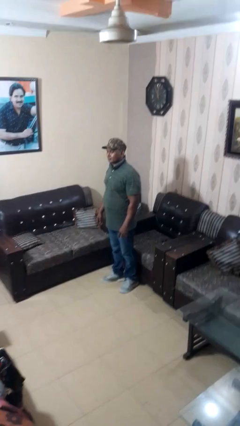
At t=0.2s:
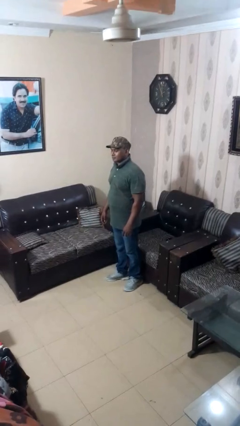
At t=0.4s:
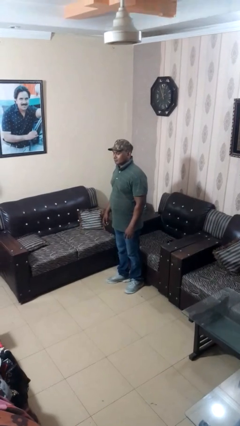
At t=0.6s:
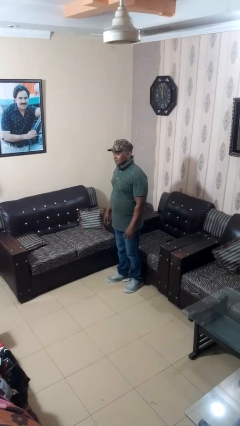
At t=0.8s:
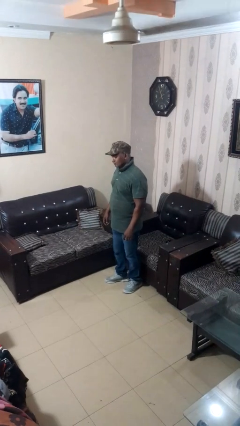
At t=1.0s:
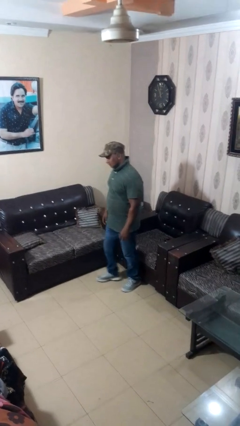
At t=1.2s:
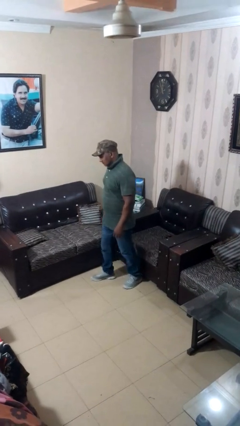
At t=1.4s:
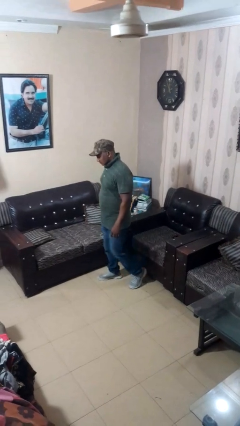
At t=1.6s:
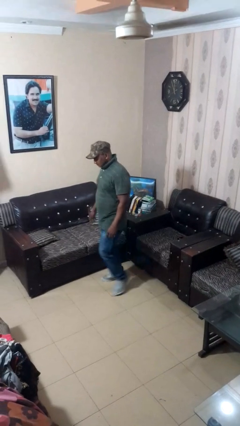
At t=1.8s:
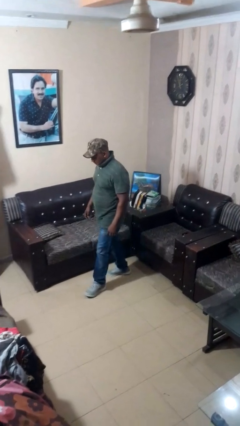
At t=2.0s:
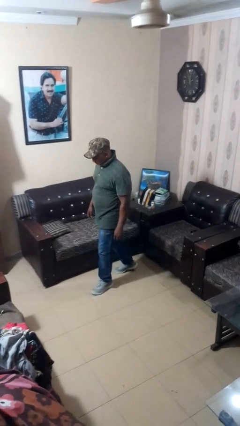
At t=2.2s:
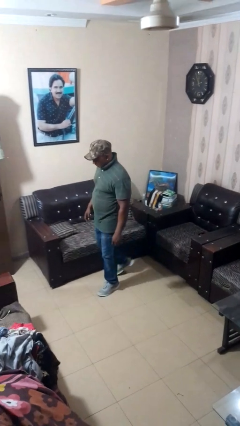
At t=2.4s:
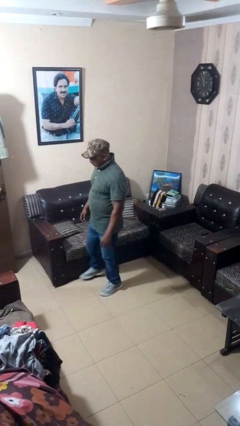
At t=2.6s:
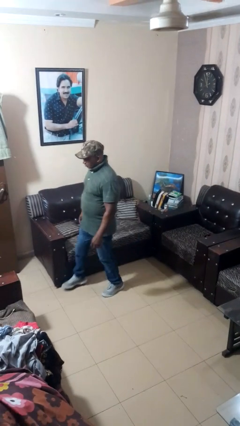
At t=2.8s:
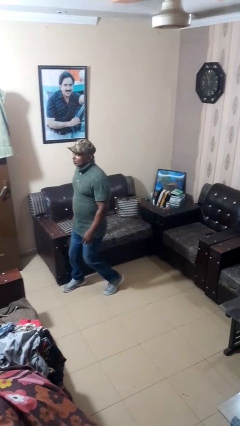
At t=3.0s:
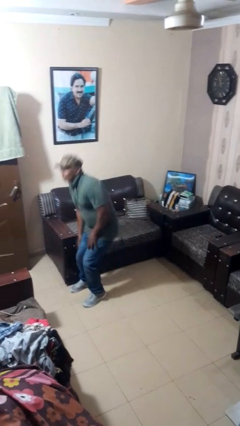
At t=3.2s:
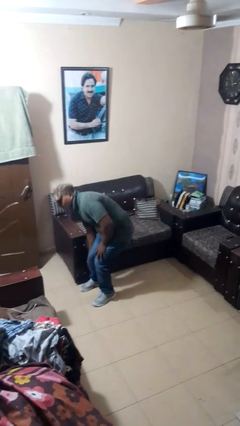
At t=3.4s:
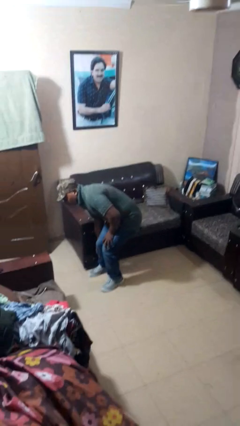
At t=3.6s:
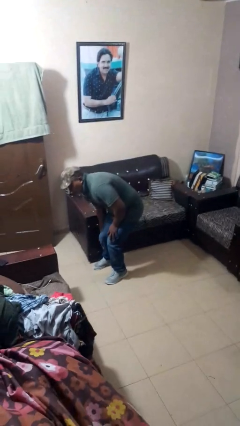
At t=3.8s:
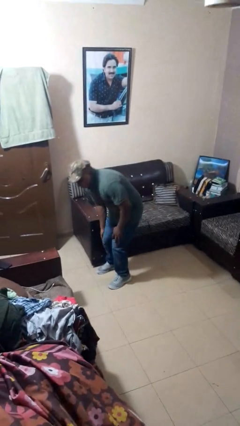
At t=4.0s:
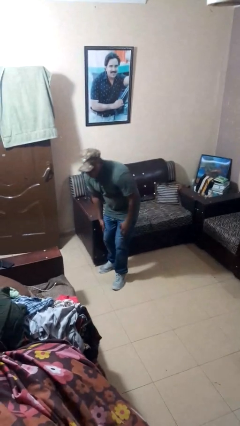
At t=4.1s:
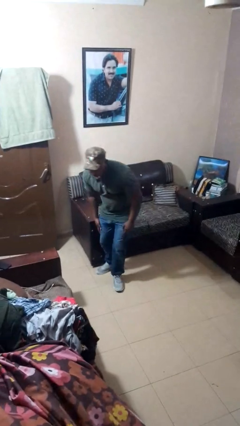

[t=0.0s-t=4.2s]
person stubs toe

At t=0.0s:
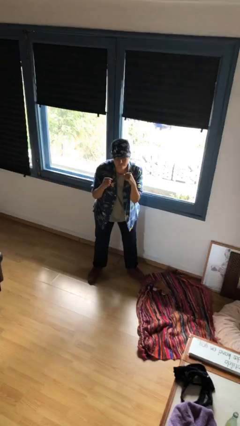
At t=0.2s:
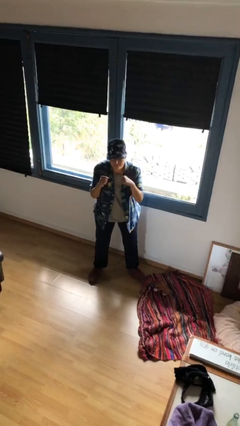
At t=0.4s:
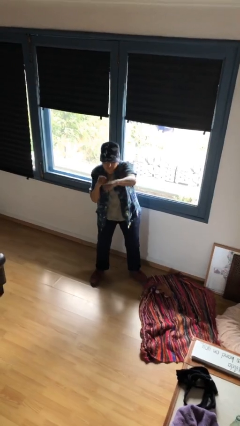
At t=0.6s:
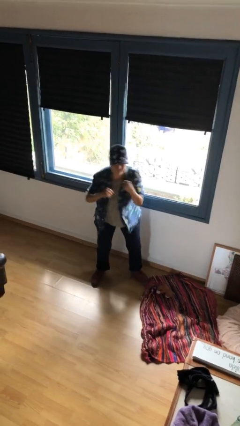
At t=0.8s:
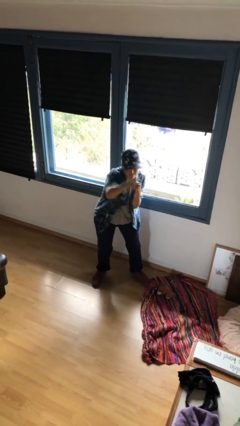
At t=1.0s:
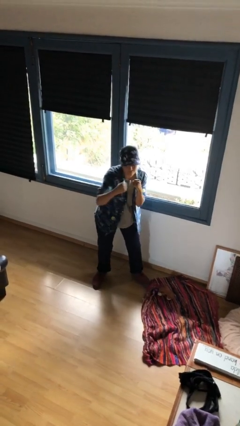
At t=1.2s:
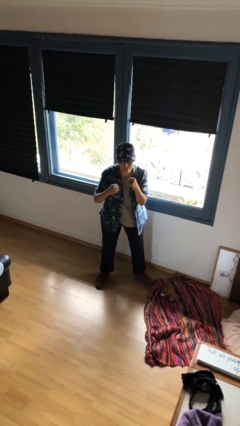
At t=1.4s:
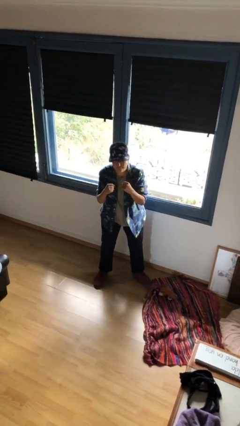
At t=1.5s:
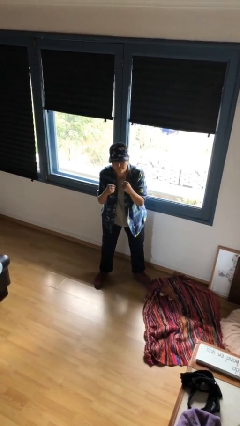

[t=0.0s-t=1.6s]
person punches

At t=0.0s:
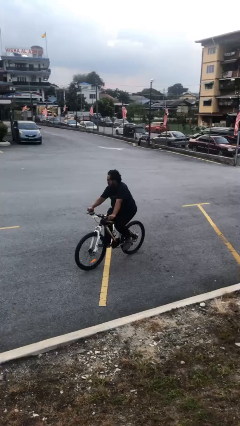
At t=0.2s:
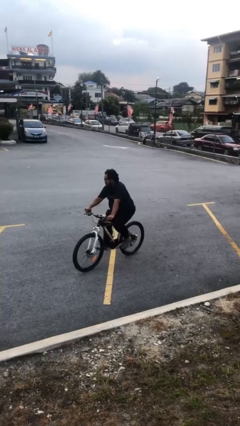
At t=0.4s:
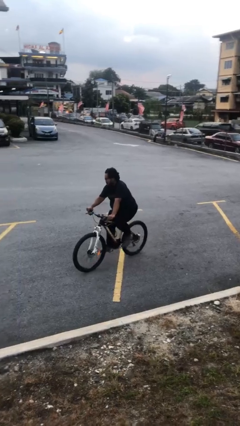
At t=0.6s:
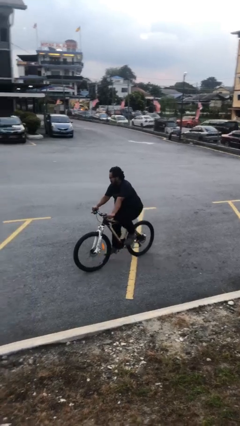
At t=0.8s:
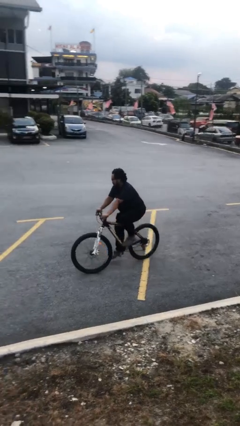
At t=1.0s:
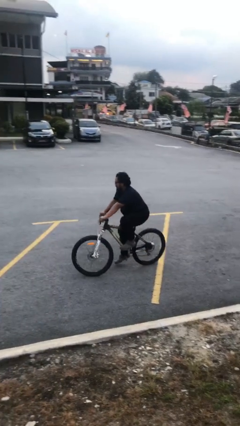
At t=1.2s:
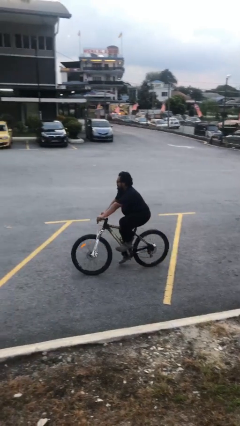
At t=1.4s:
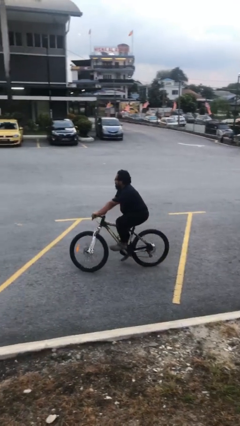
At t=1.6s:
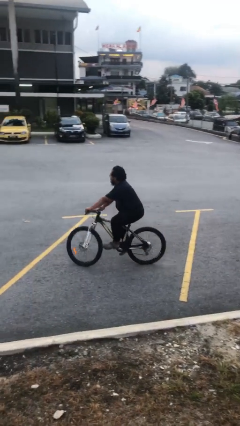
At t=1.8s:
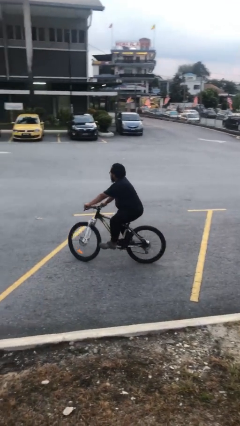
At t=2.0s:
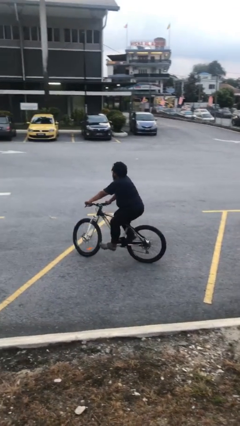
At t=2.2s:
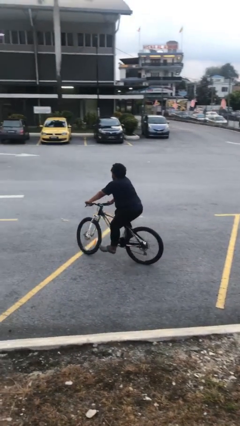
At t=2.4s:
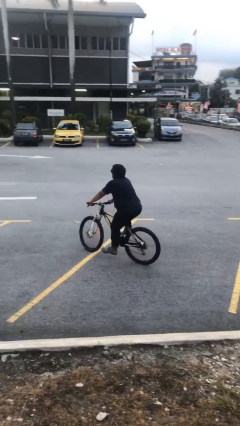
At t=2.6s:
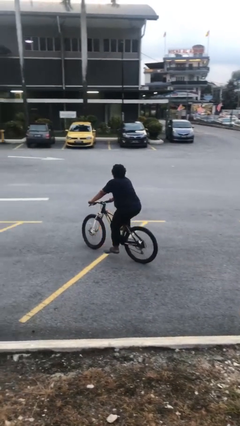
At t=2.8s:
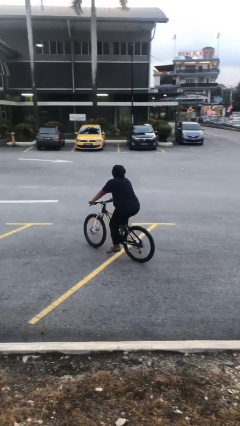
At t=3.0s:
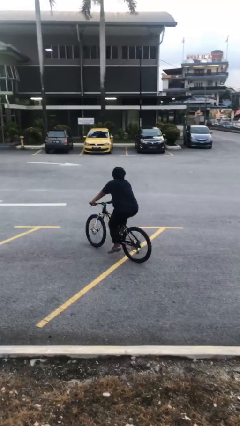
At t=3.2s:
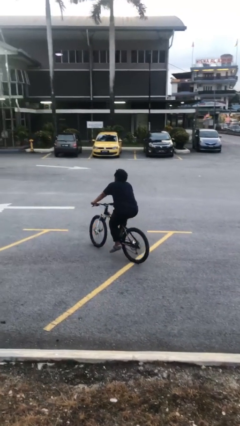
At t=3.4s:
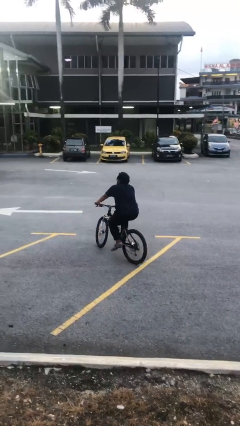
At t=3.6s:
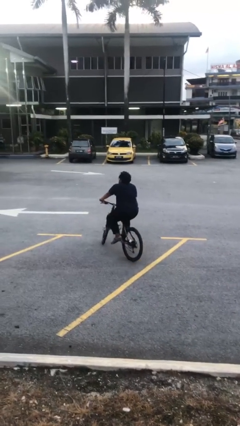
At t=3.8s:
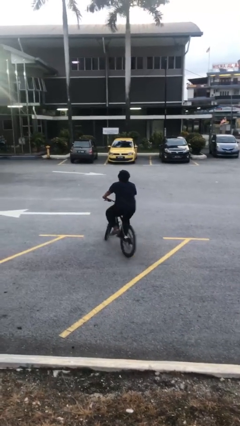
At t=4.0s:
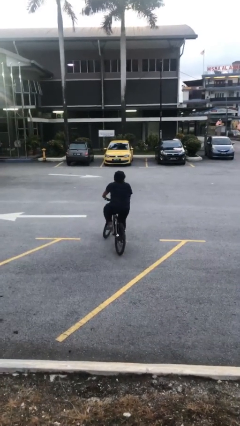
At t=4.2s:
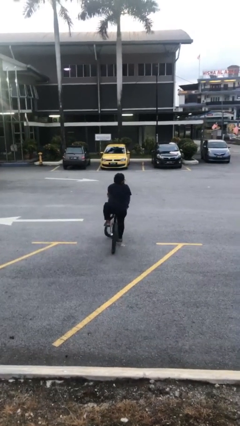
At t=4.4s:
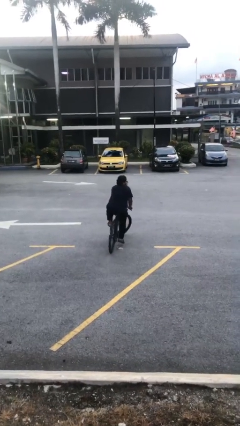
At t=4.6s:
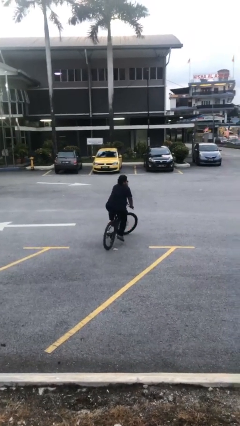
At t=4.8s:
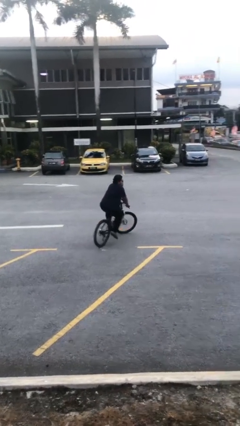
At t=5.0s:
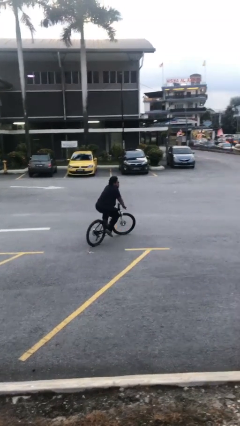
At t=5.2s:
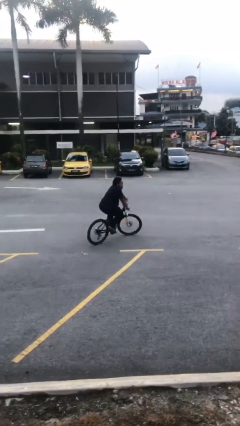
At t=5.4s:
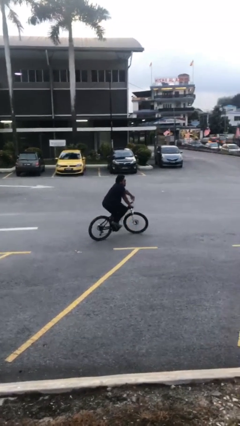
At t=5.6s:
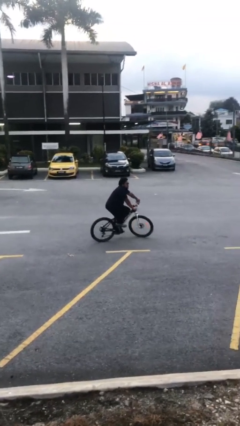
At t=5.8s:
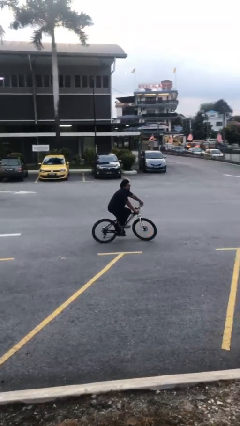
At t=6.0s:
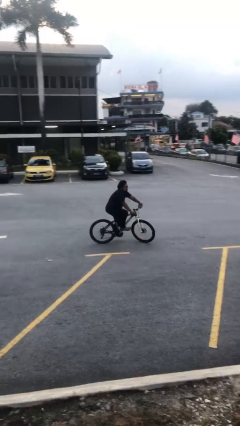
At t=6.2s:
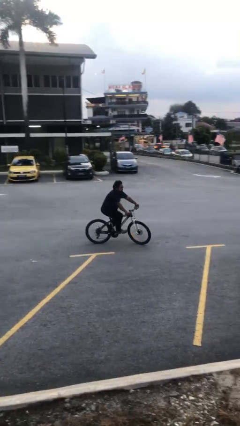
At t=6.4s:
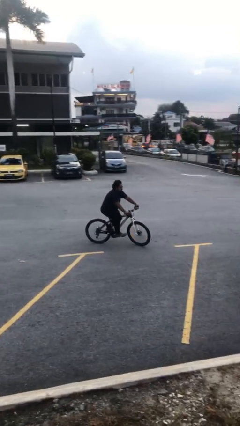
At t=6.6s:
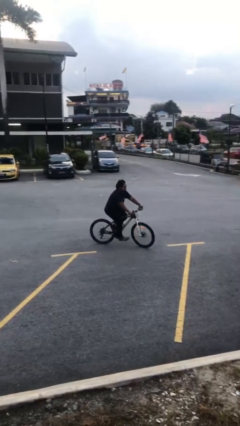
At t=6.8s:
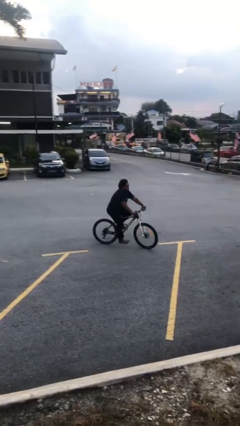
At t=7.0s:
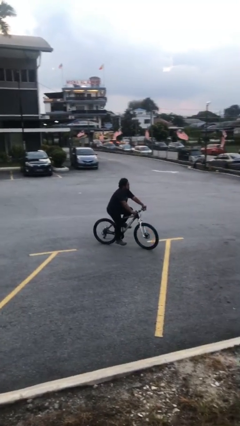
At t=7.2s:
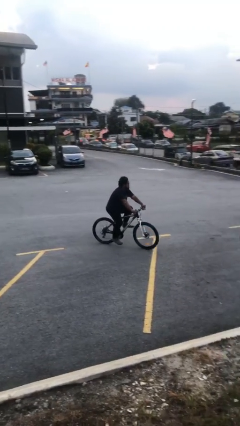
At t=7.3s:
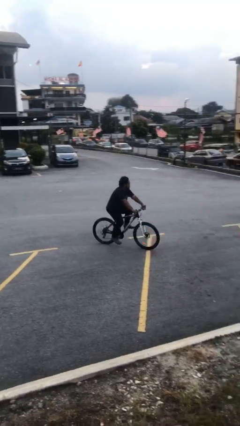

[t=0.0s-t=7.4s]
person rides bicycle

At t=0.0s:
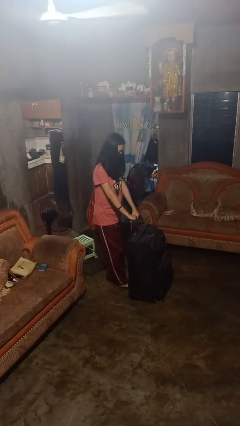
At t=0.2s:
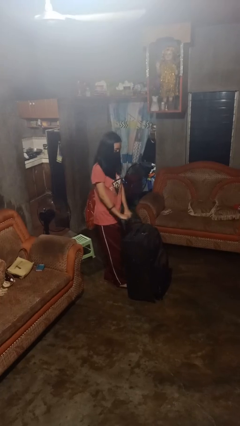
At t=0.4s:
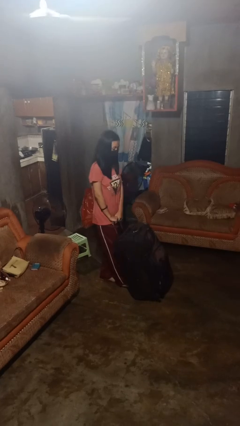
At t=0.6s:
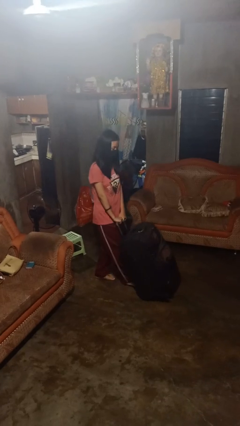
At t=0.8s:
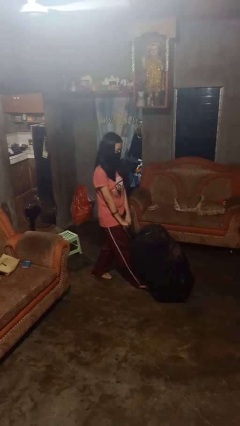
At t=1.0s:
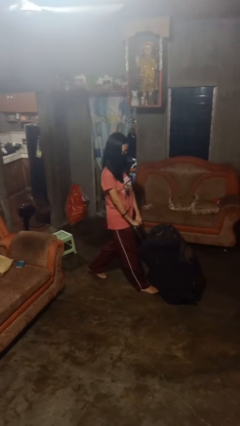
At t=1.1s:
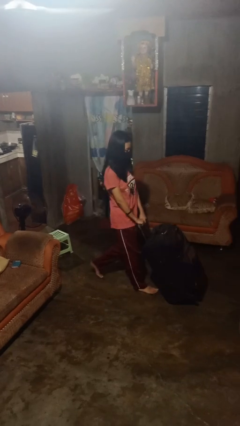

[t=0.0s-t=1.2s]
person pushes wheeled cart

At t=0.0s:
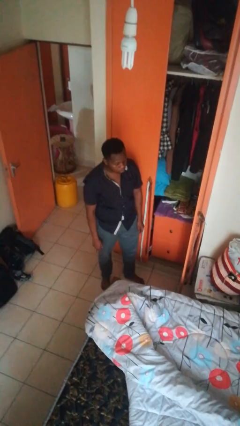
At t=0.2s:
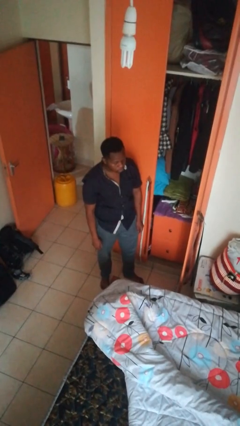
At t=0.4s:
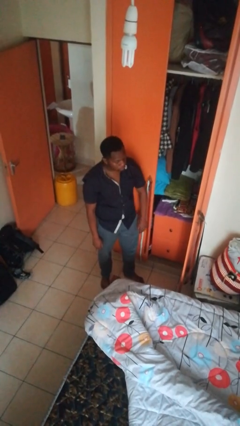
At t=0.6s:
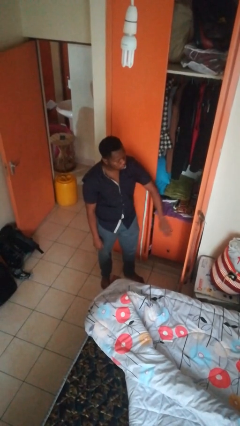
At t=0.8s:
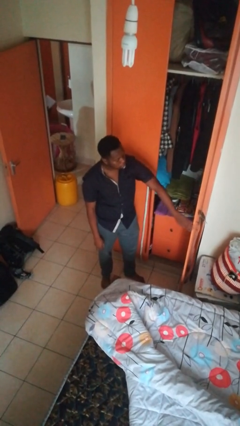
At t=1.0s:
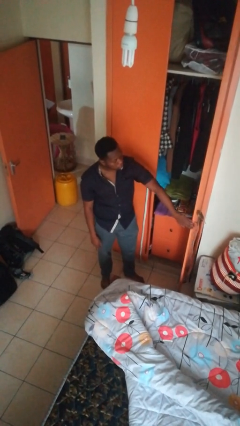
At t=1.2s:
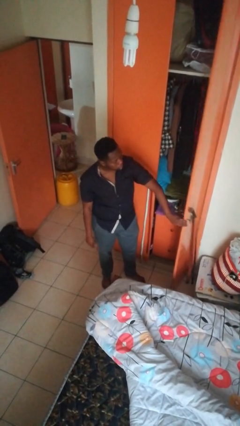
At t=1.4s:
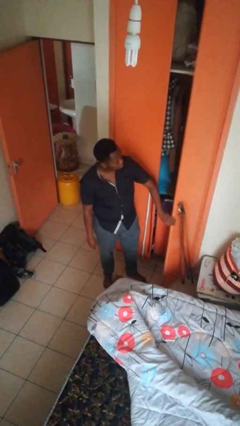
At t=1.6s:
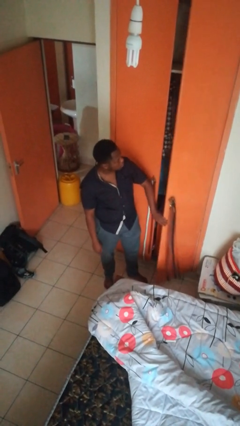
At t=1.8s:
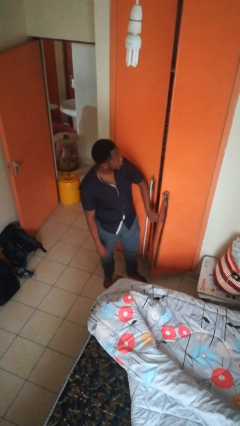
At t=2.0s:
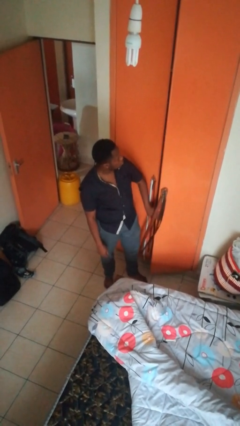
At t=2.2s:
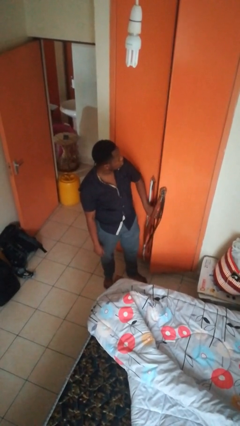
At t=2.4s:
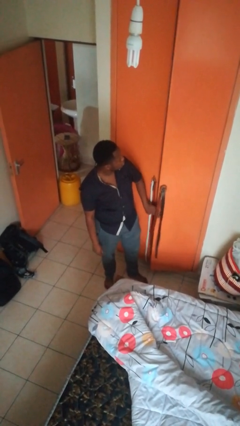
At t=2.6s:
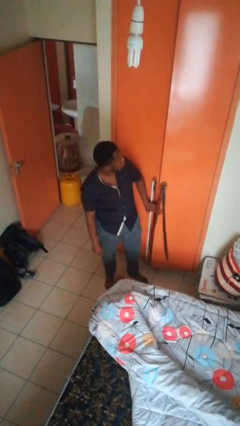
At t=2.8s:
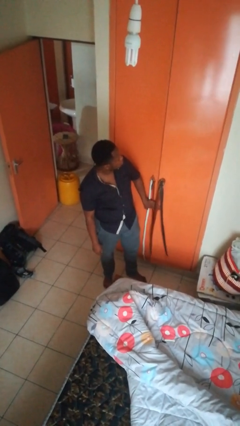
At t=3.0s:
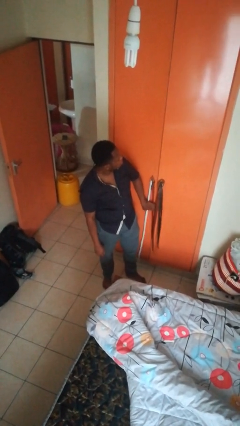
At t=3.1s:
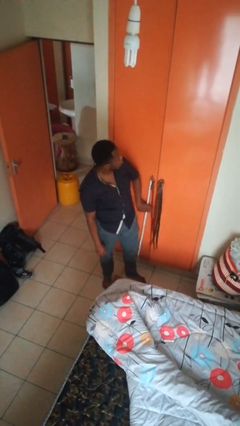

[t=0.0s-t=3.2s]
person closes closet door
